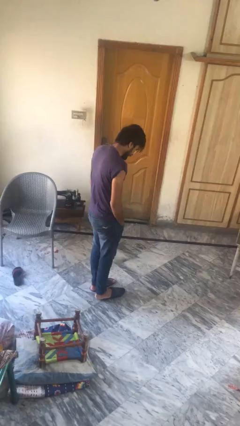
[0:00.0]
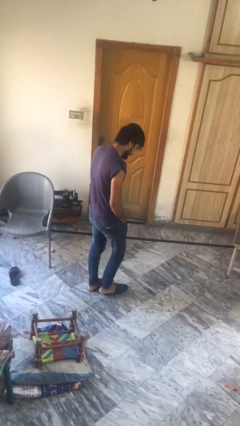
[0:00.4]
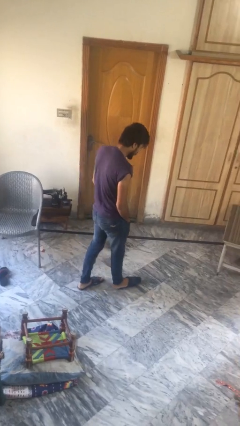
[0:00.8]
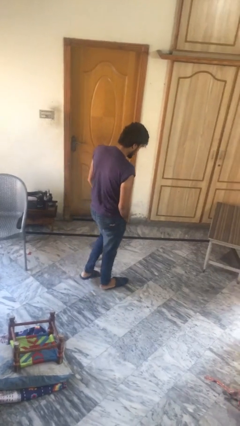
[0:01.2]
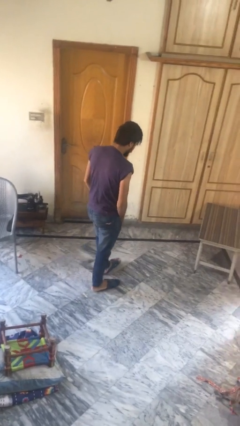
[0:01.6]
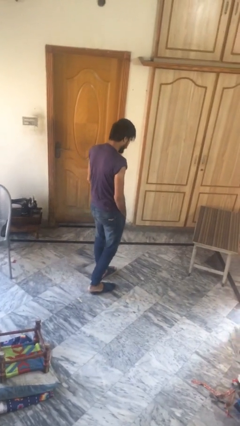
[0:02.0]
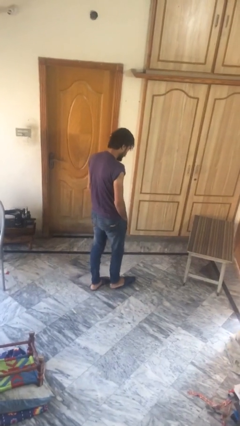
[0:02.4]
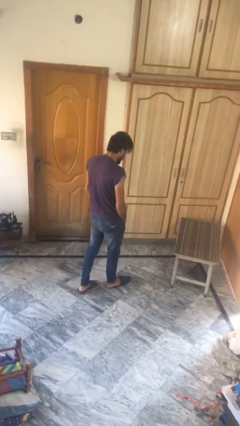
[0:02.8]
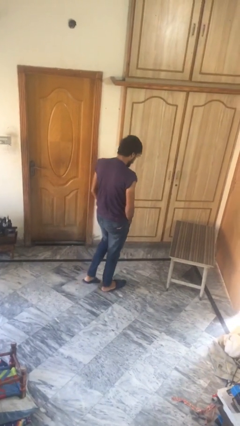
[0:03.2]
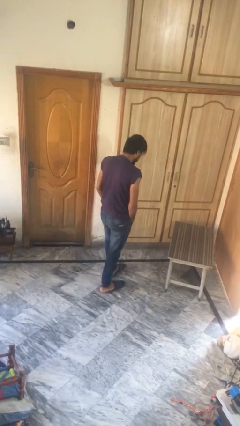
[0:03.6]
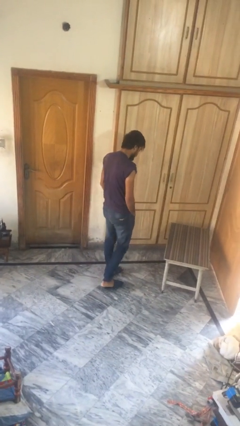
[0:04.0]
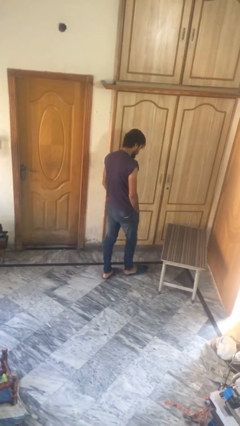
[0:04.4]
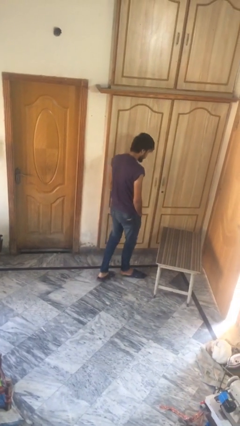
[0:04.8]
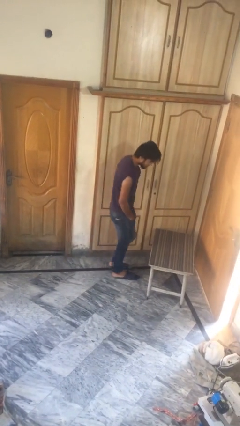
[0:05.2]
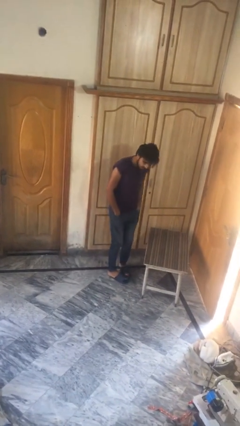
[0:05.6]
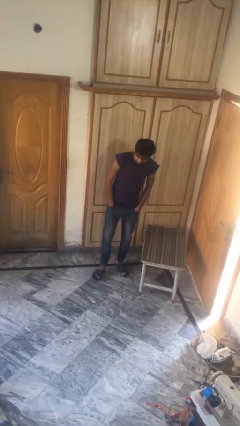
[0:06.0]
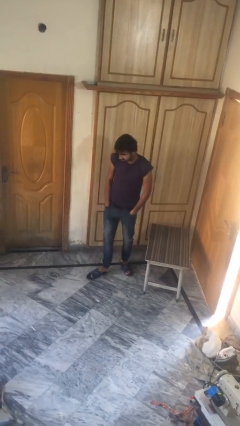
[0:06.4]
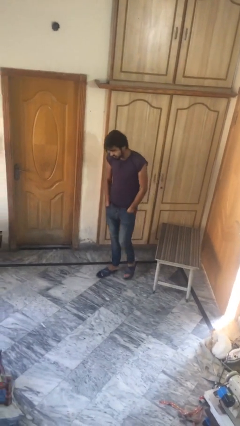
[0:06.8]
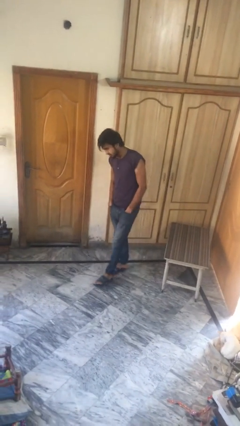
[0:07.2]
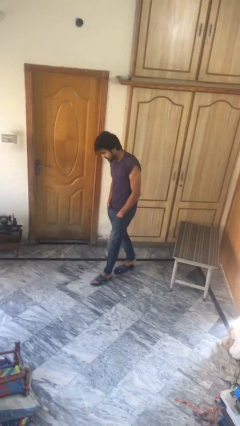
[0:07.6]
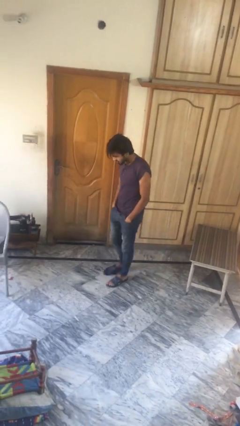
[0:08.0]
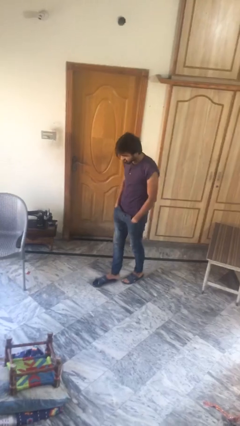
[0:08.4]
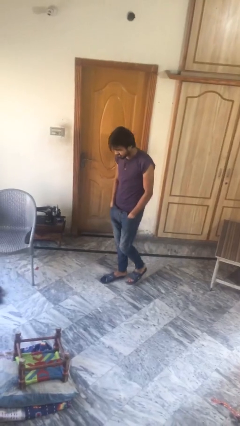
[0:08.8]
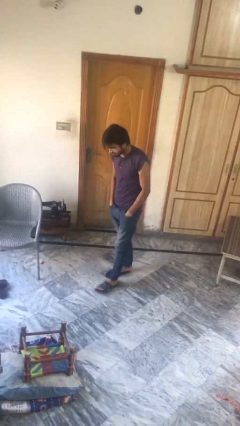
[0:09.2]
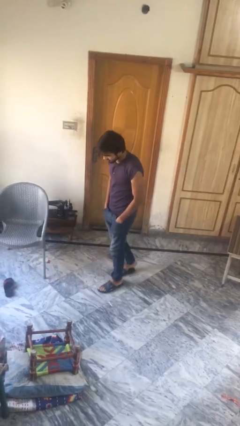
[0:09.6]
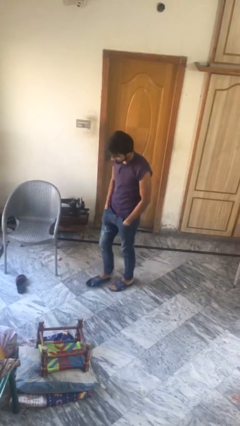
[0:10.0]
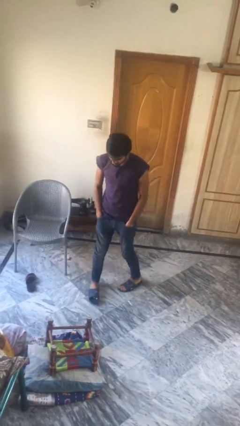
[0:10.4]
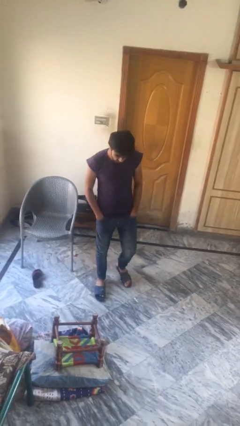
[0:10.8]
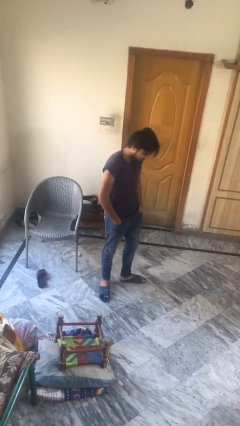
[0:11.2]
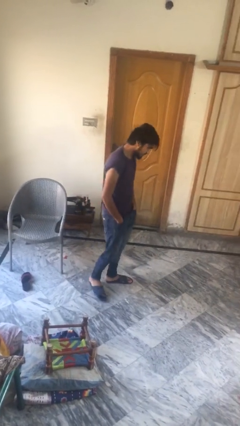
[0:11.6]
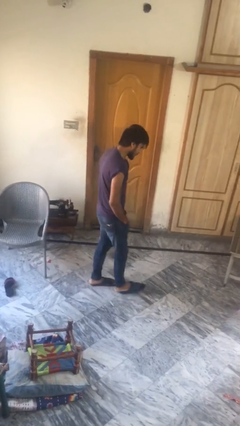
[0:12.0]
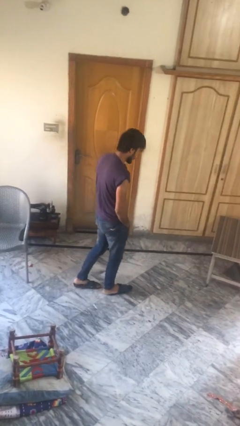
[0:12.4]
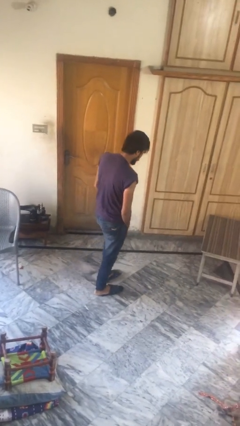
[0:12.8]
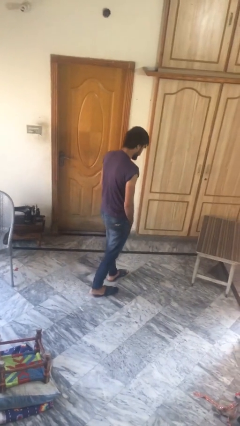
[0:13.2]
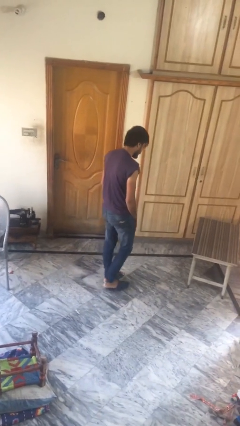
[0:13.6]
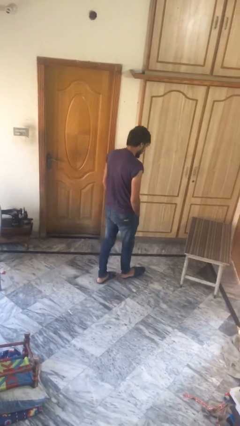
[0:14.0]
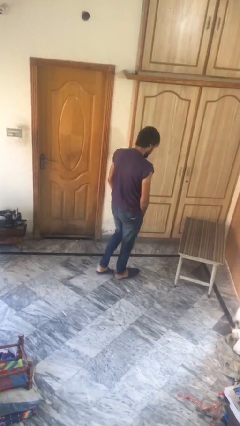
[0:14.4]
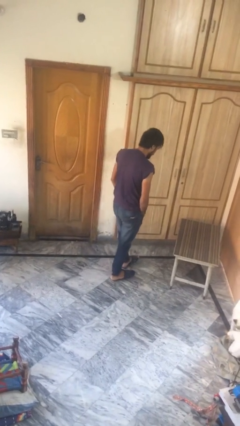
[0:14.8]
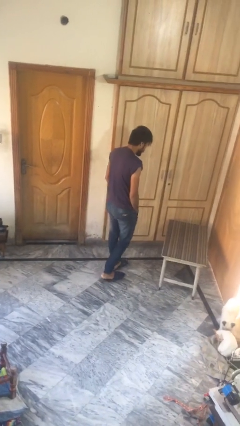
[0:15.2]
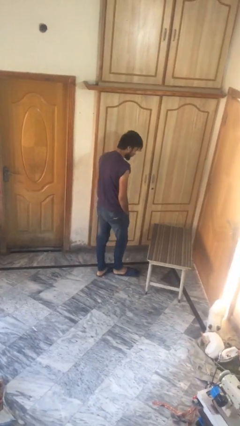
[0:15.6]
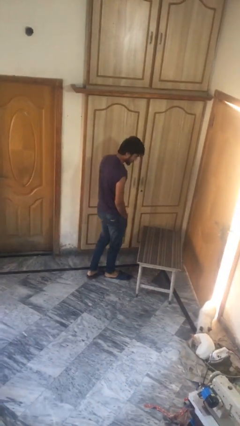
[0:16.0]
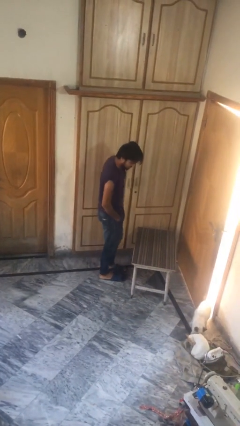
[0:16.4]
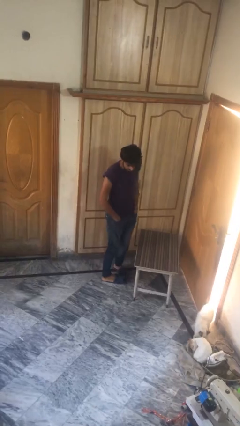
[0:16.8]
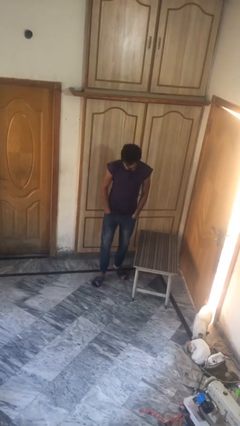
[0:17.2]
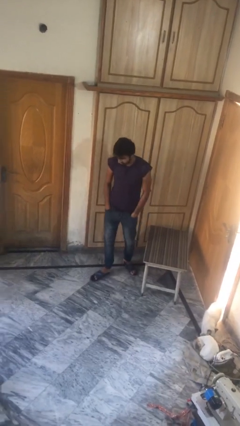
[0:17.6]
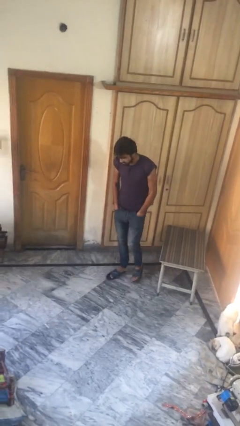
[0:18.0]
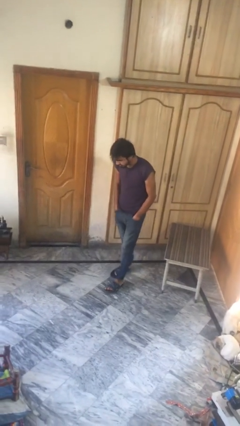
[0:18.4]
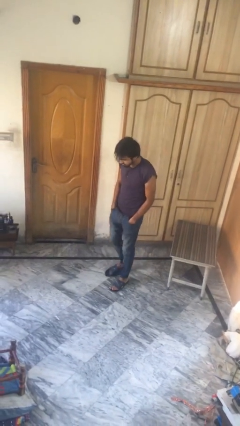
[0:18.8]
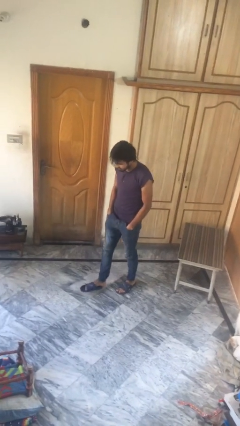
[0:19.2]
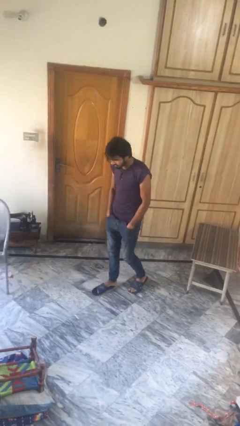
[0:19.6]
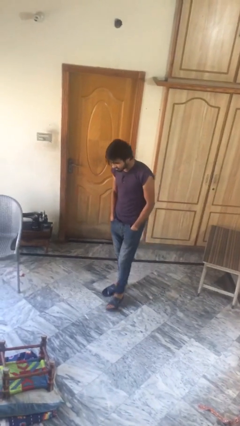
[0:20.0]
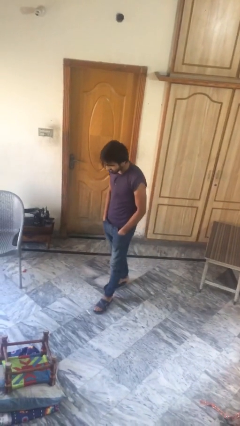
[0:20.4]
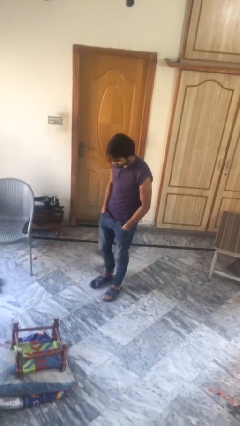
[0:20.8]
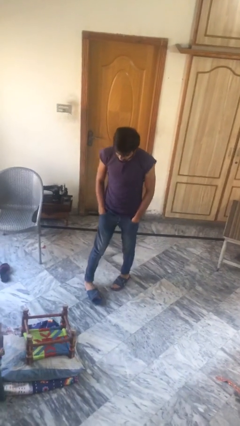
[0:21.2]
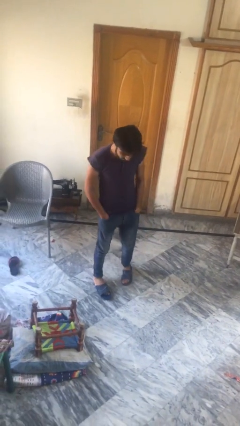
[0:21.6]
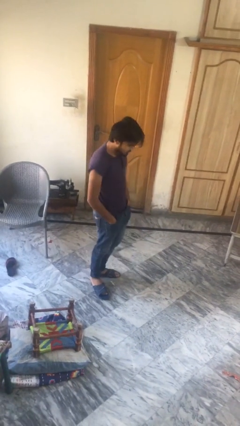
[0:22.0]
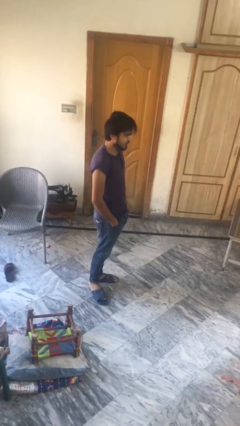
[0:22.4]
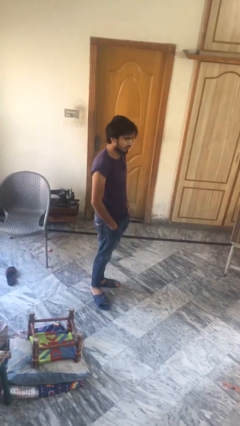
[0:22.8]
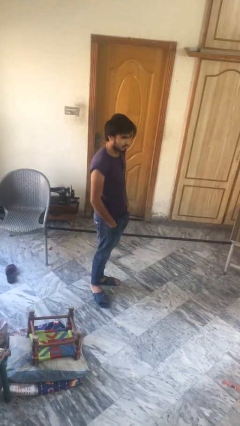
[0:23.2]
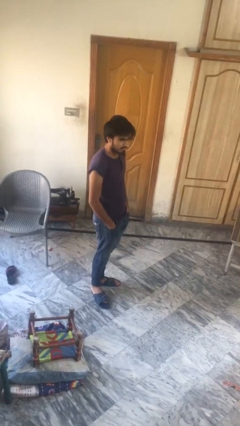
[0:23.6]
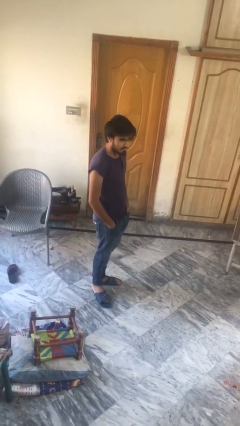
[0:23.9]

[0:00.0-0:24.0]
person walks

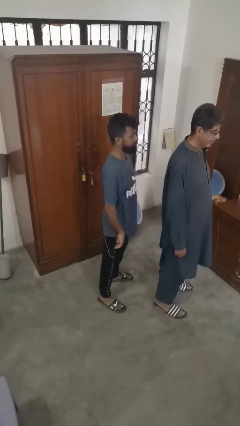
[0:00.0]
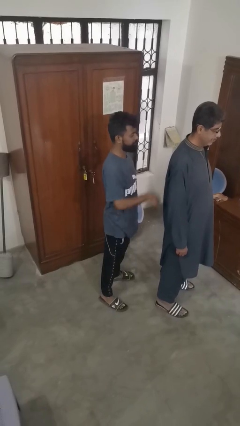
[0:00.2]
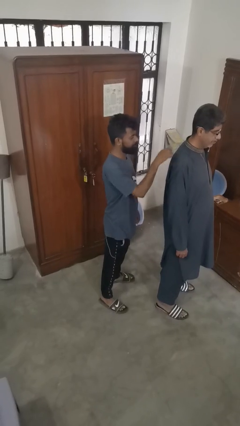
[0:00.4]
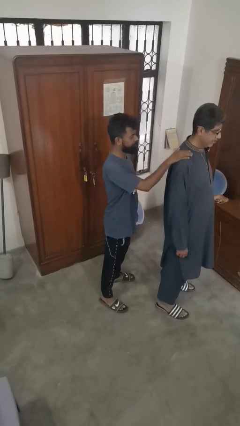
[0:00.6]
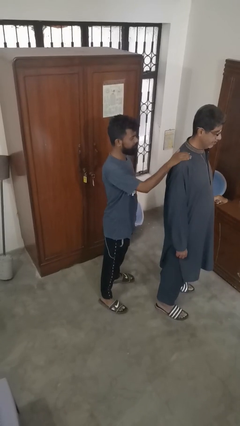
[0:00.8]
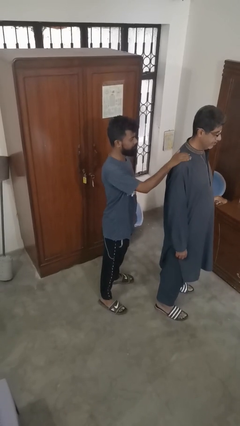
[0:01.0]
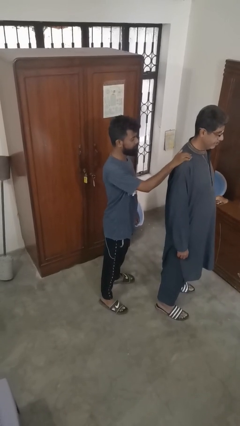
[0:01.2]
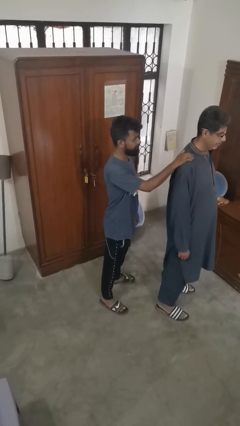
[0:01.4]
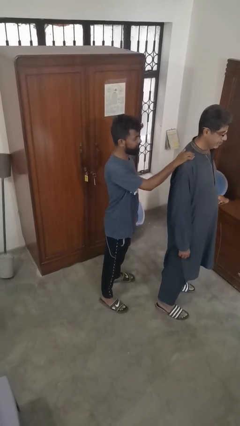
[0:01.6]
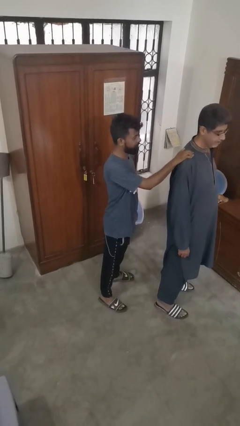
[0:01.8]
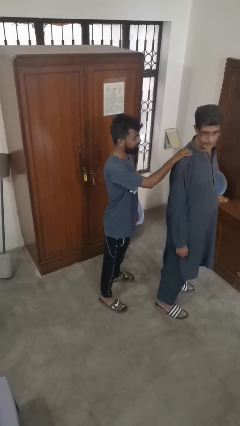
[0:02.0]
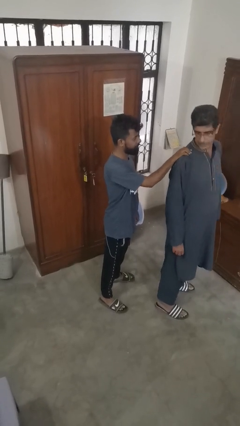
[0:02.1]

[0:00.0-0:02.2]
person grabs person by shoulder

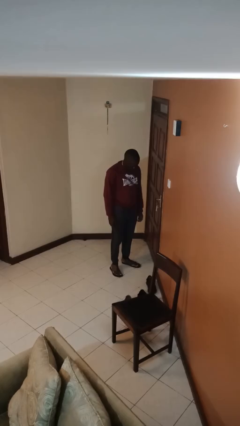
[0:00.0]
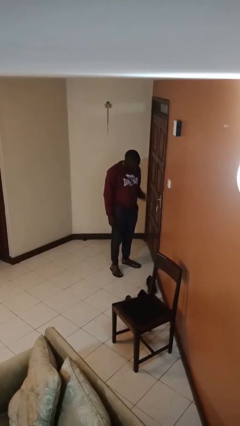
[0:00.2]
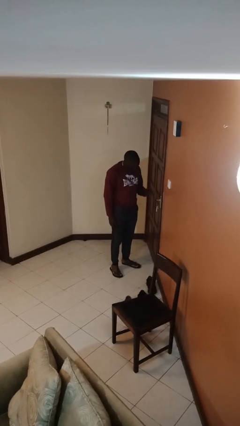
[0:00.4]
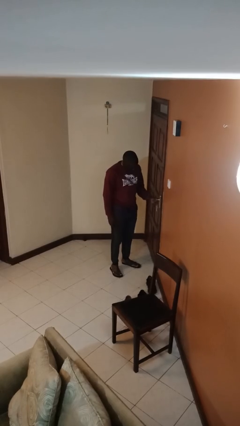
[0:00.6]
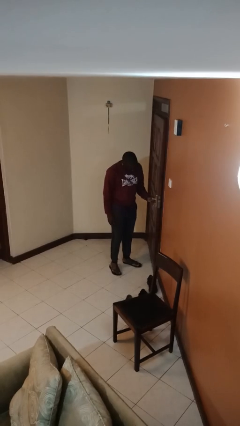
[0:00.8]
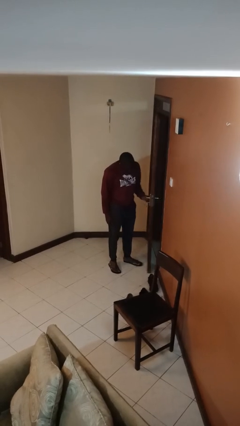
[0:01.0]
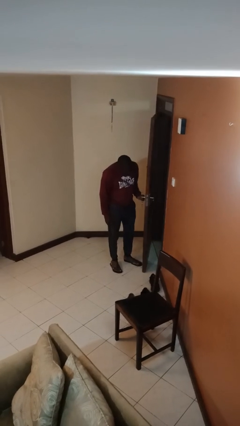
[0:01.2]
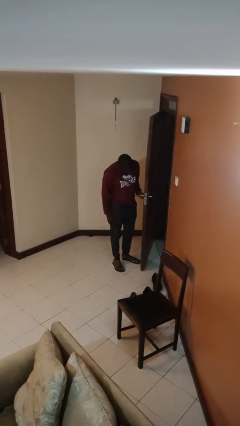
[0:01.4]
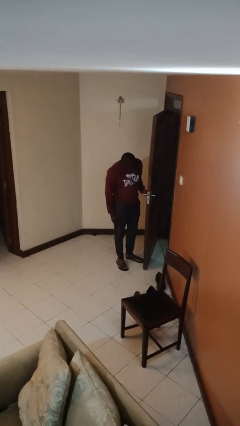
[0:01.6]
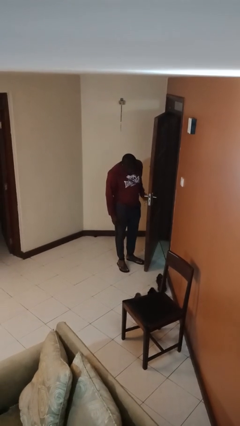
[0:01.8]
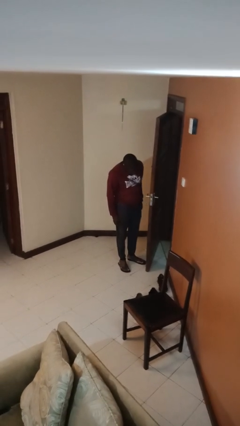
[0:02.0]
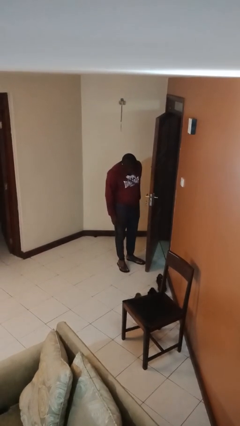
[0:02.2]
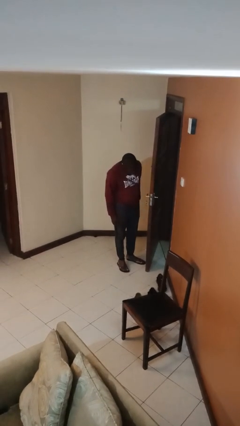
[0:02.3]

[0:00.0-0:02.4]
person opens facility door

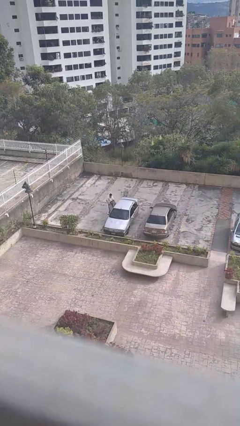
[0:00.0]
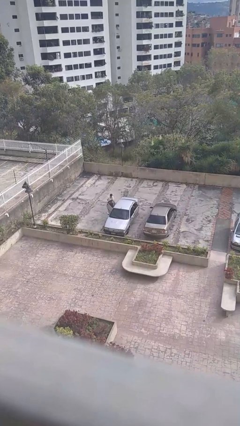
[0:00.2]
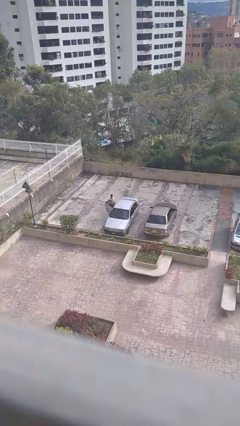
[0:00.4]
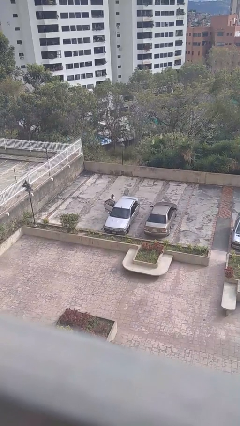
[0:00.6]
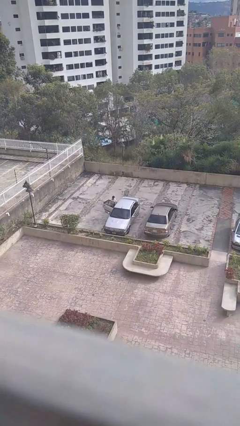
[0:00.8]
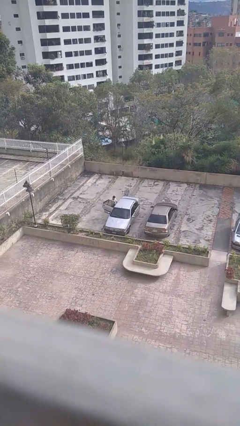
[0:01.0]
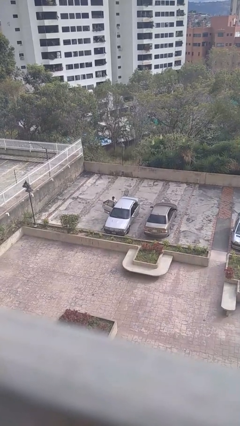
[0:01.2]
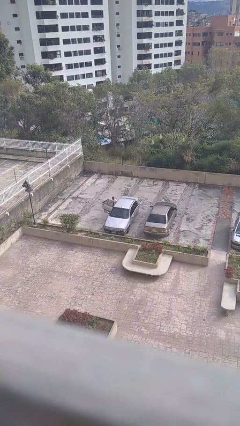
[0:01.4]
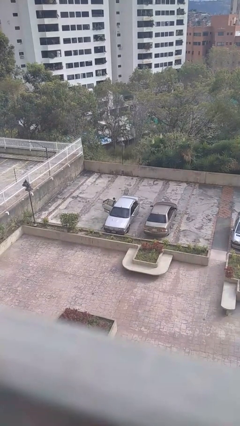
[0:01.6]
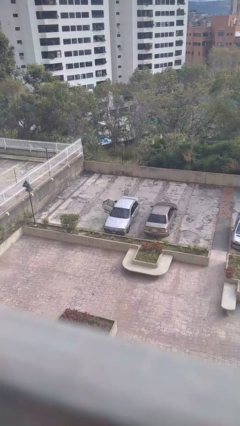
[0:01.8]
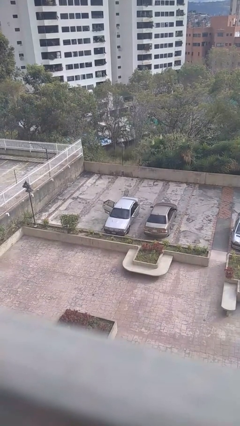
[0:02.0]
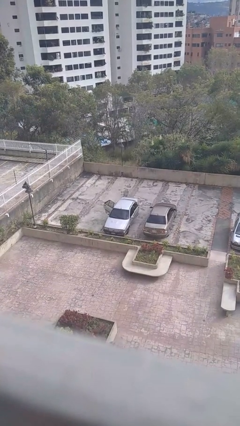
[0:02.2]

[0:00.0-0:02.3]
car picks up person
